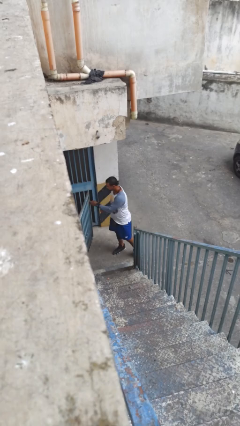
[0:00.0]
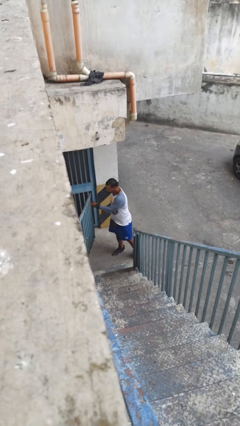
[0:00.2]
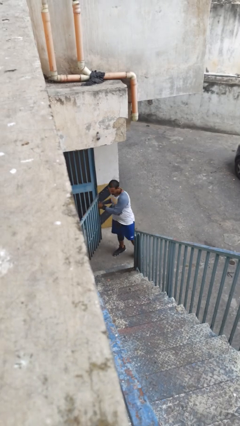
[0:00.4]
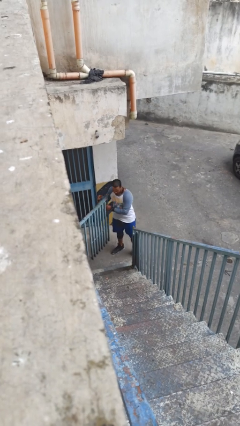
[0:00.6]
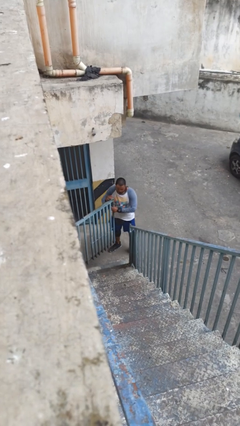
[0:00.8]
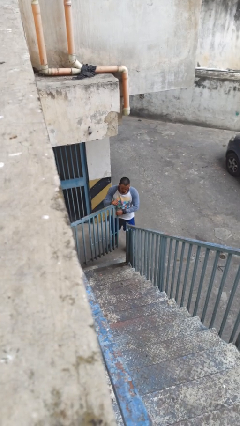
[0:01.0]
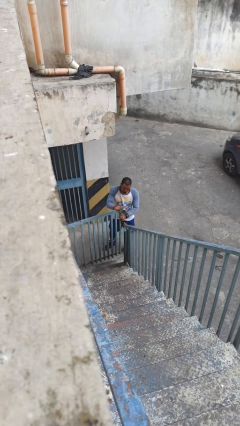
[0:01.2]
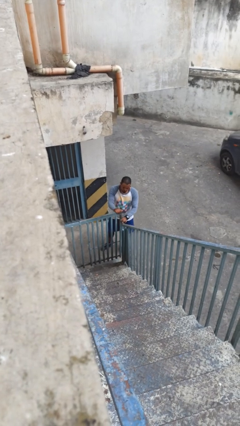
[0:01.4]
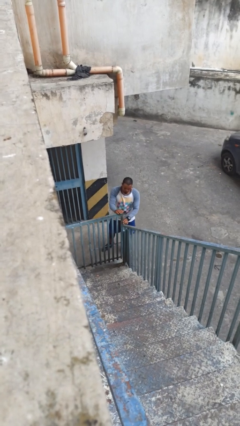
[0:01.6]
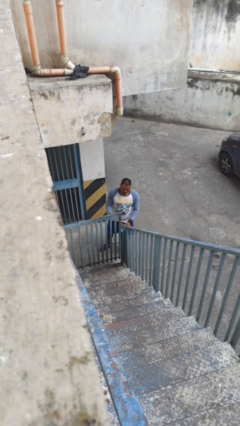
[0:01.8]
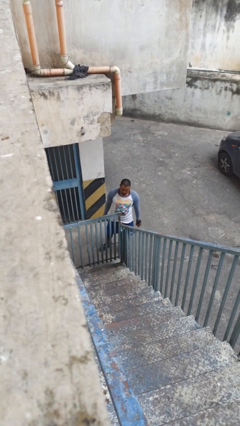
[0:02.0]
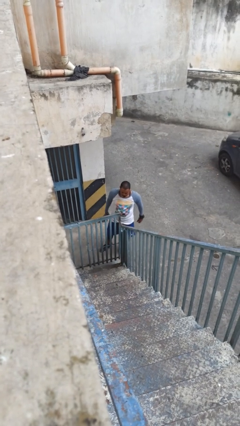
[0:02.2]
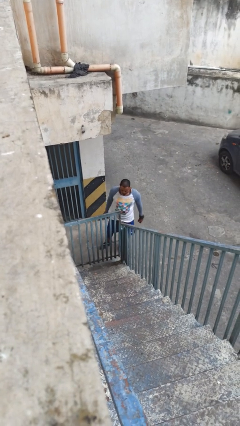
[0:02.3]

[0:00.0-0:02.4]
person closes facility door

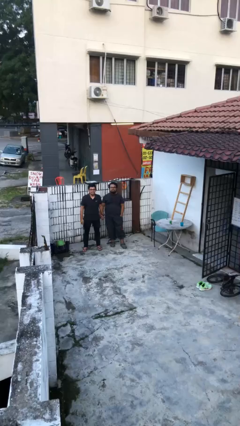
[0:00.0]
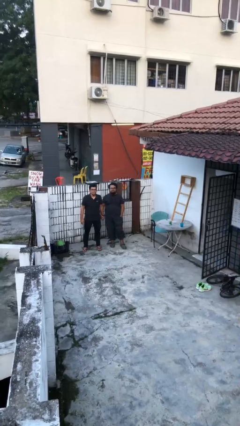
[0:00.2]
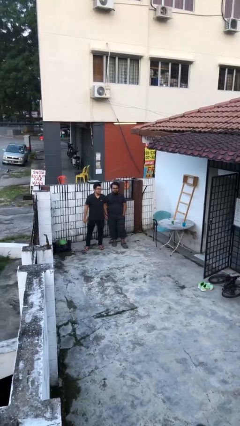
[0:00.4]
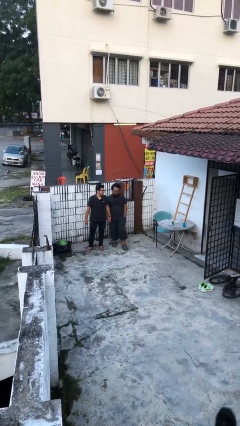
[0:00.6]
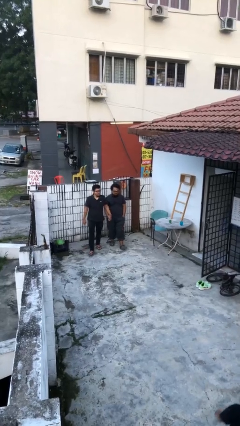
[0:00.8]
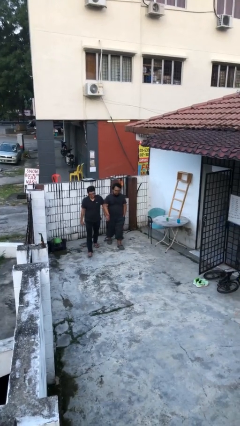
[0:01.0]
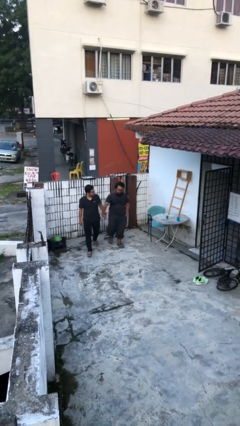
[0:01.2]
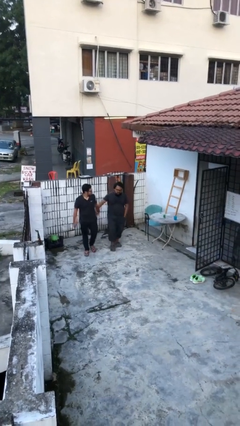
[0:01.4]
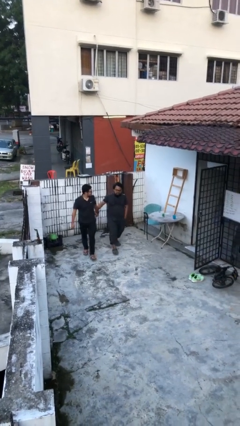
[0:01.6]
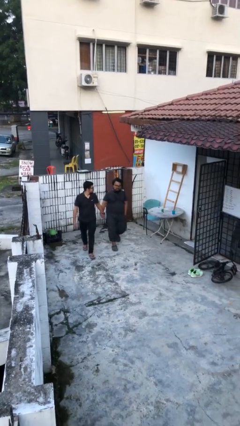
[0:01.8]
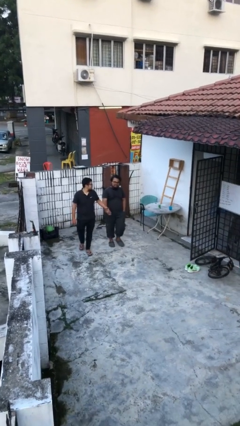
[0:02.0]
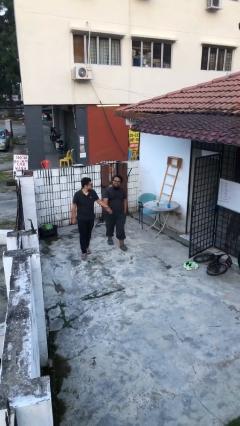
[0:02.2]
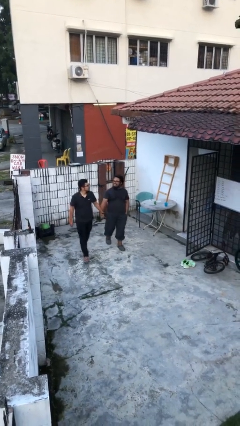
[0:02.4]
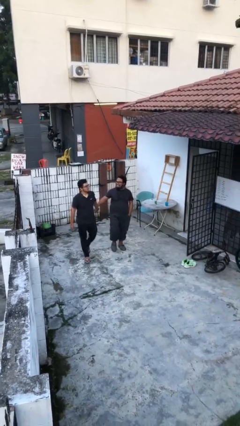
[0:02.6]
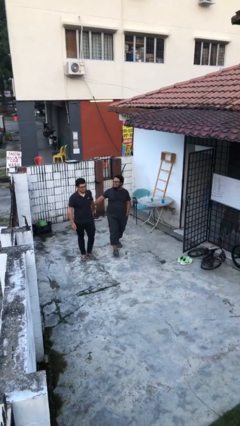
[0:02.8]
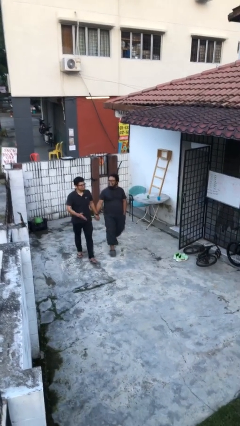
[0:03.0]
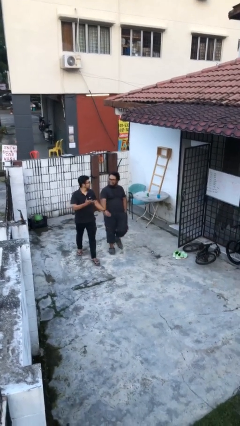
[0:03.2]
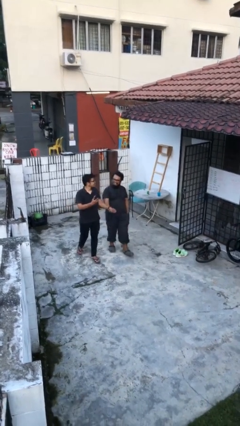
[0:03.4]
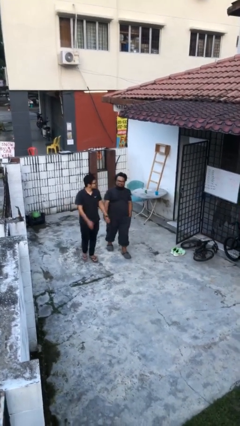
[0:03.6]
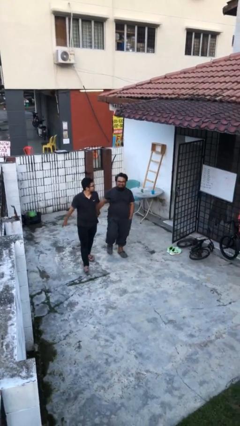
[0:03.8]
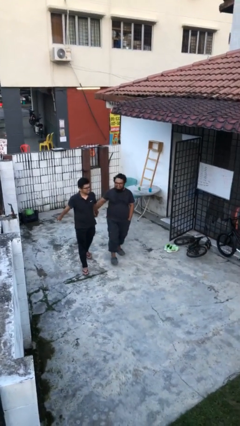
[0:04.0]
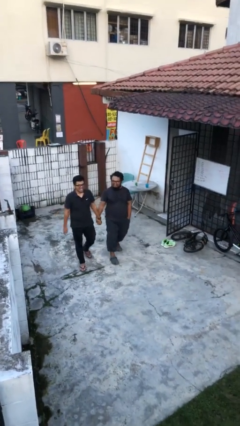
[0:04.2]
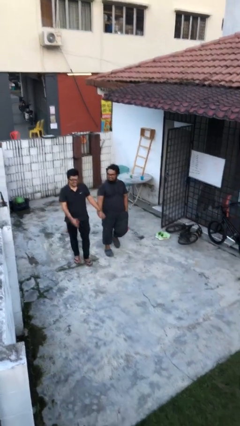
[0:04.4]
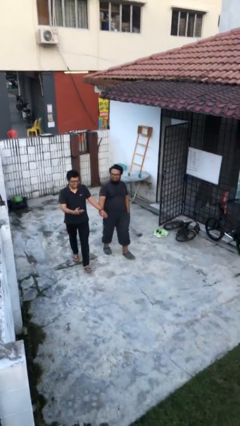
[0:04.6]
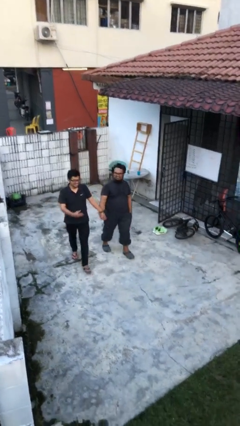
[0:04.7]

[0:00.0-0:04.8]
person holds hand

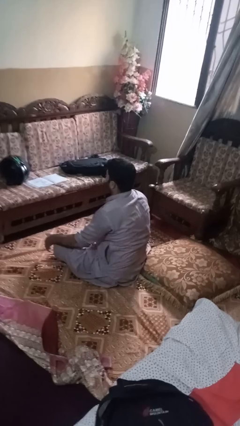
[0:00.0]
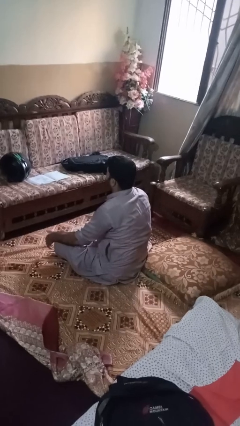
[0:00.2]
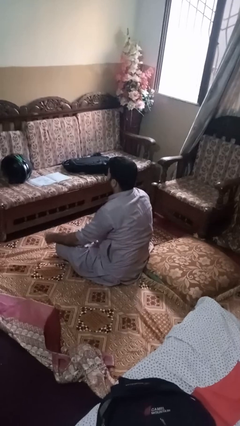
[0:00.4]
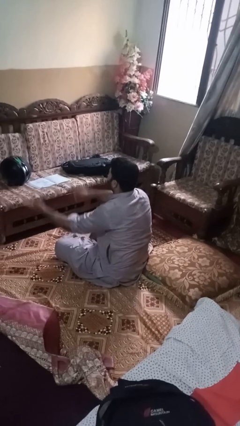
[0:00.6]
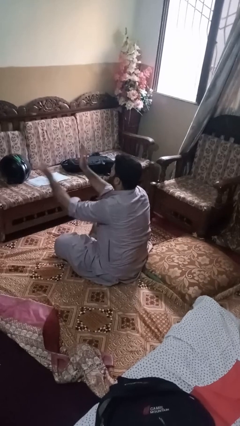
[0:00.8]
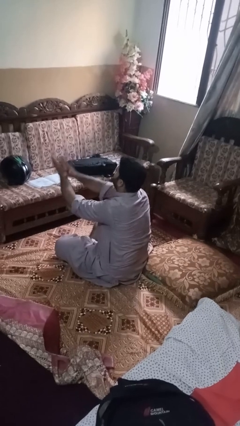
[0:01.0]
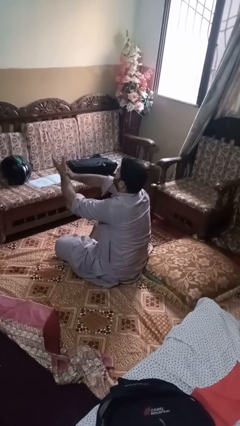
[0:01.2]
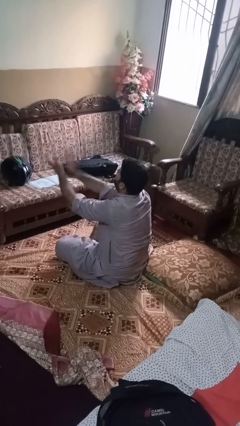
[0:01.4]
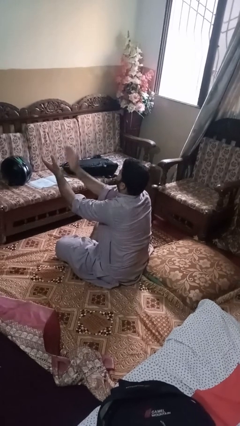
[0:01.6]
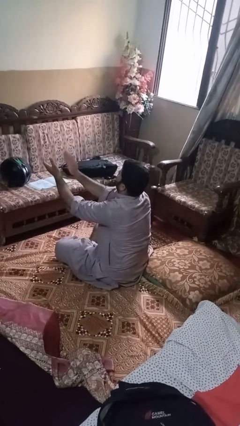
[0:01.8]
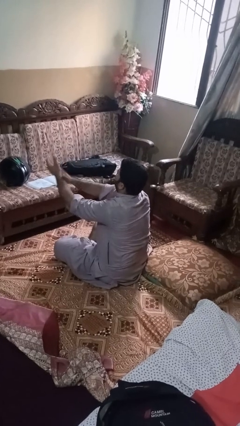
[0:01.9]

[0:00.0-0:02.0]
person claps hands

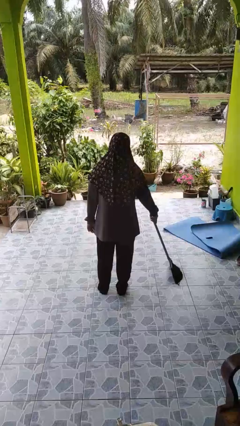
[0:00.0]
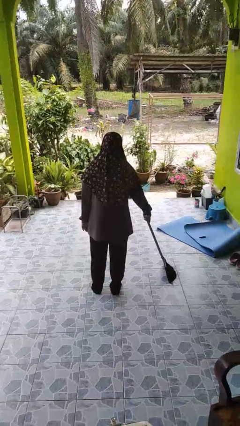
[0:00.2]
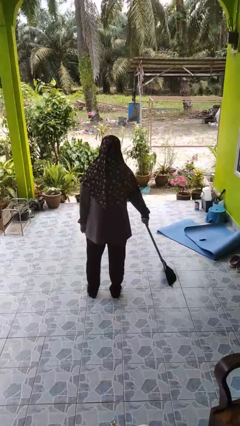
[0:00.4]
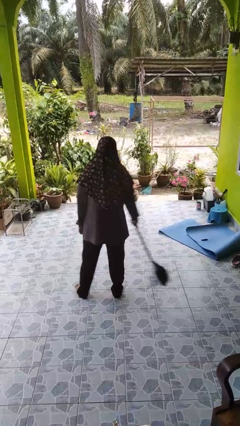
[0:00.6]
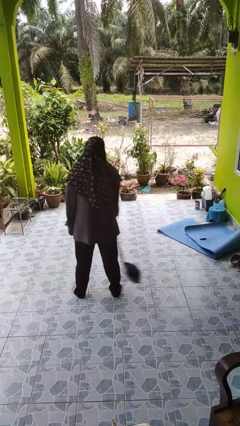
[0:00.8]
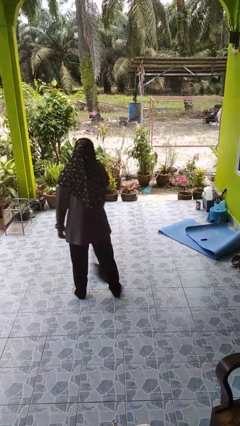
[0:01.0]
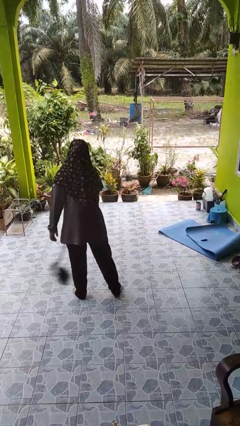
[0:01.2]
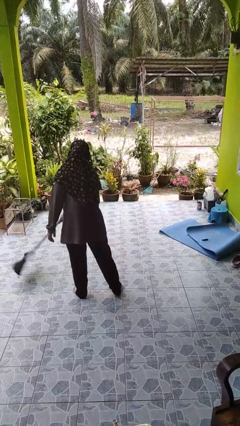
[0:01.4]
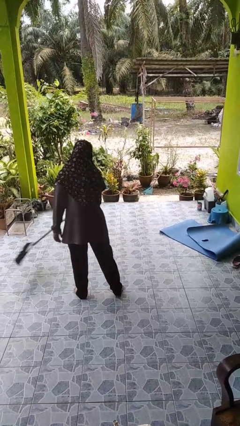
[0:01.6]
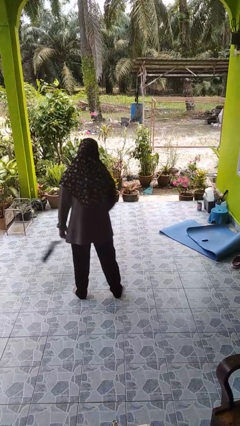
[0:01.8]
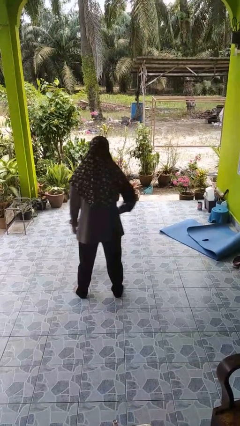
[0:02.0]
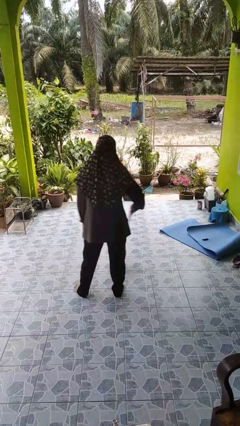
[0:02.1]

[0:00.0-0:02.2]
person sweeps floor

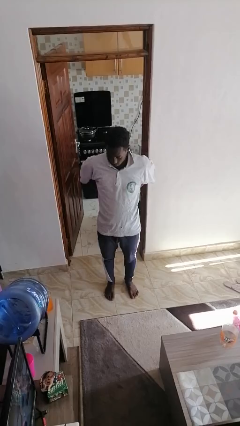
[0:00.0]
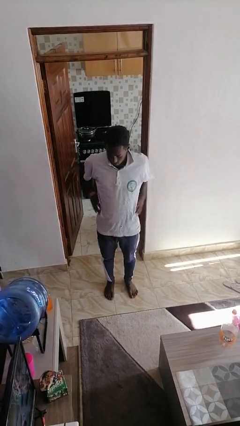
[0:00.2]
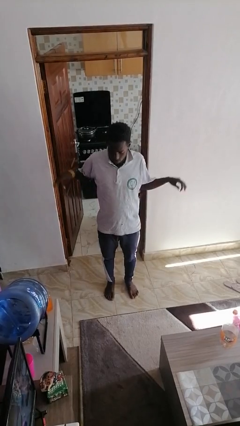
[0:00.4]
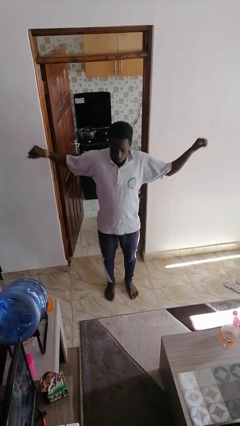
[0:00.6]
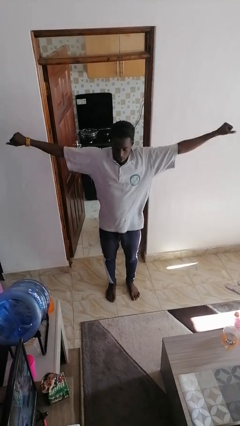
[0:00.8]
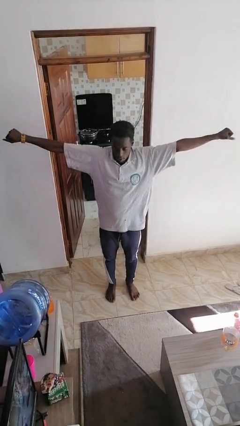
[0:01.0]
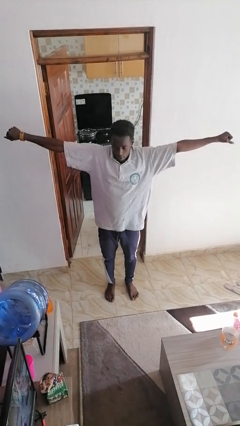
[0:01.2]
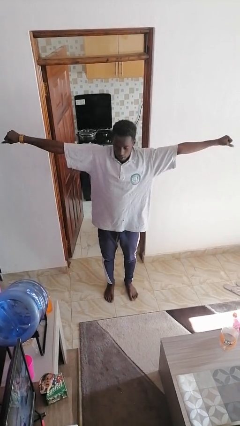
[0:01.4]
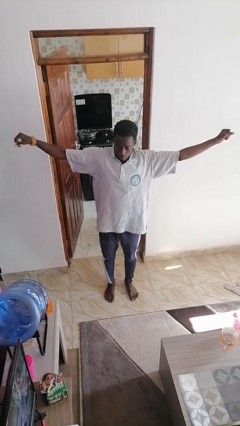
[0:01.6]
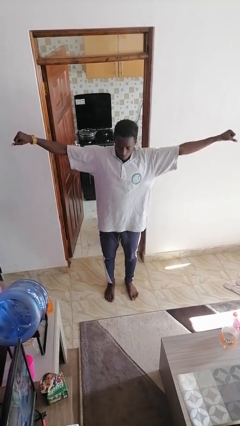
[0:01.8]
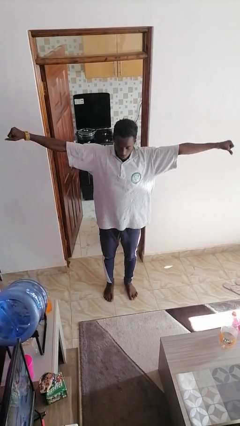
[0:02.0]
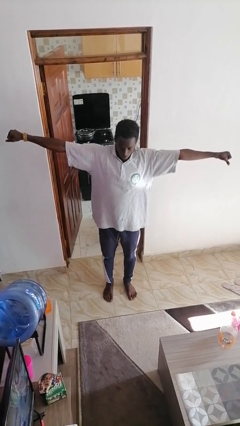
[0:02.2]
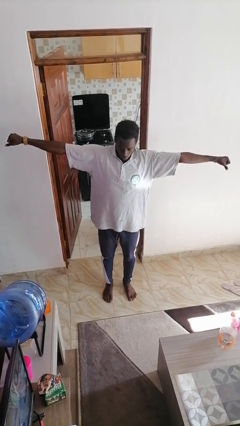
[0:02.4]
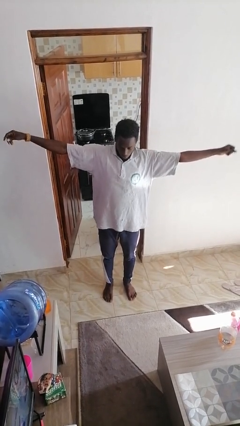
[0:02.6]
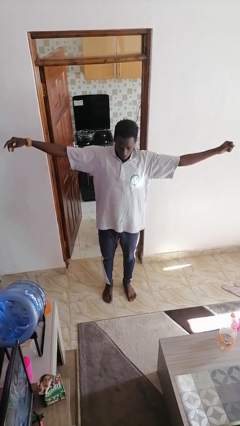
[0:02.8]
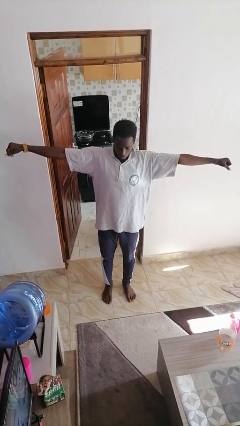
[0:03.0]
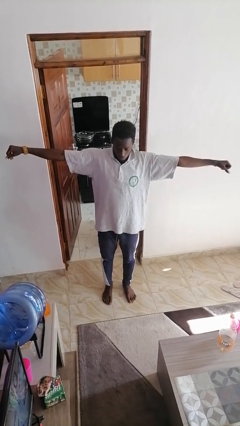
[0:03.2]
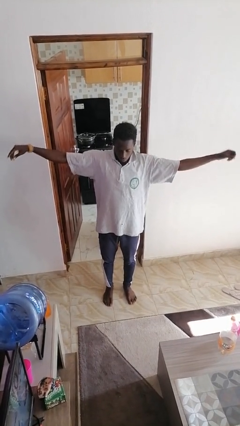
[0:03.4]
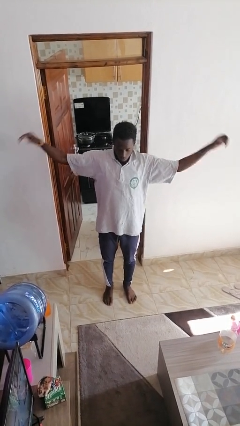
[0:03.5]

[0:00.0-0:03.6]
person stretches arms to side

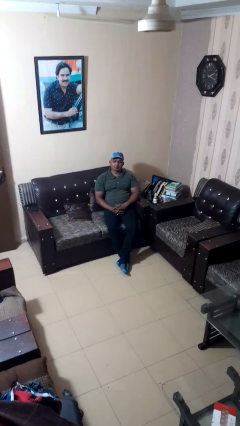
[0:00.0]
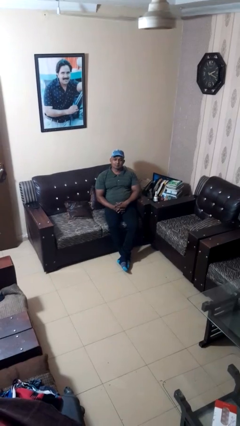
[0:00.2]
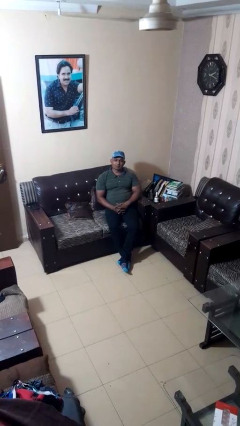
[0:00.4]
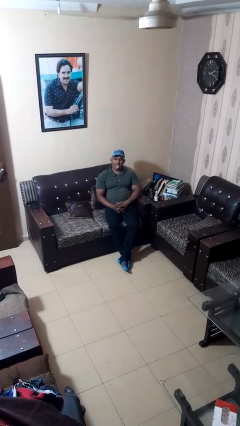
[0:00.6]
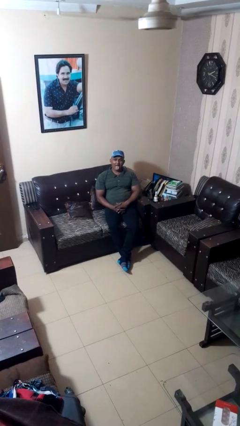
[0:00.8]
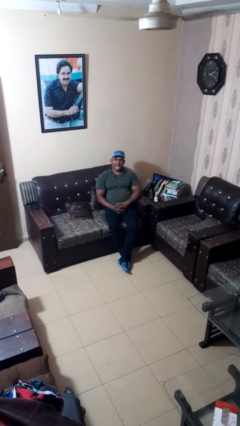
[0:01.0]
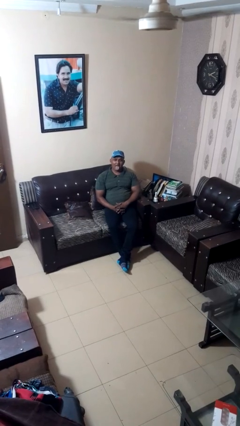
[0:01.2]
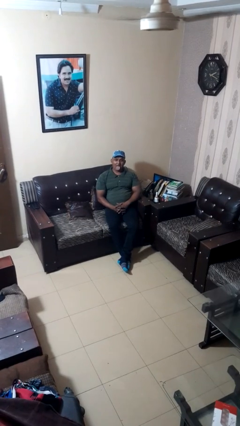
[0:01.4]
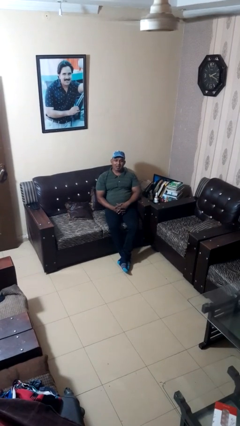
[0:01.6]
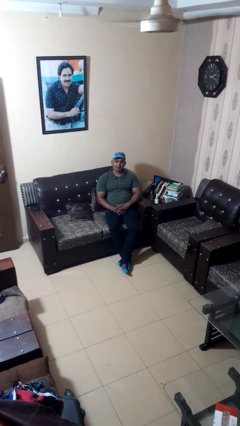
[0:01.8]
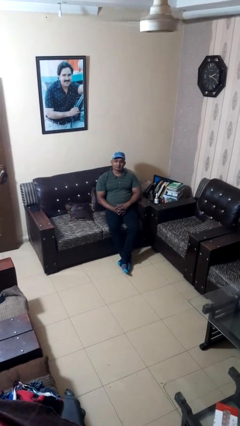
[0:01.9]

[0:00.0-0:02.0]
person sticks out tongue

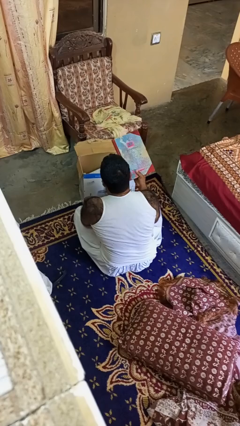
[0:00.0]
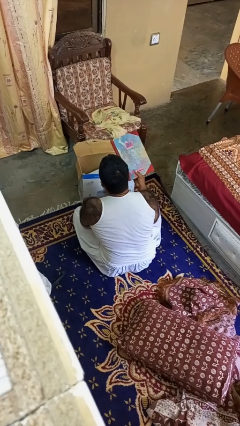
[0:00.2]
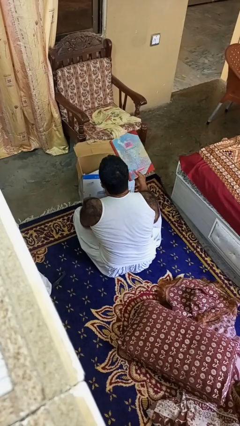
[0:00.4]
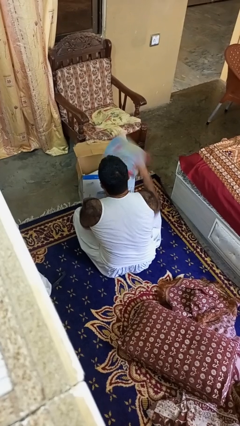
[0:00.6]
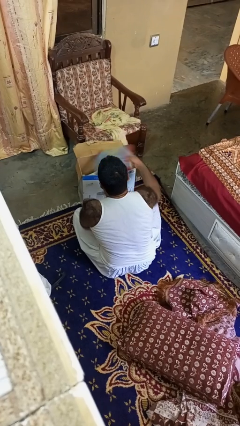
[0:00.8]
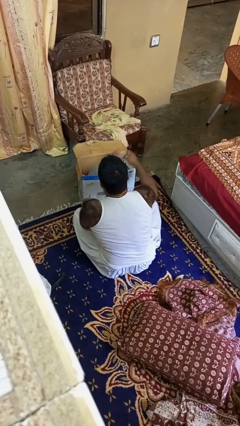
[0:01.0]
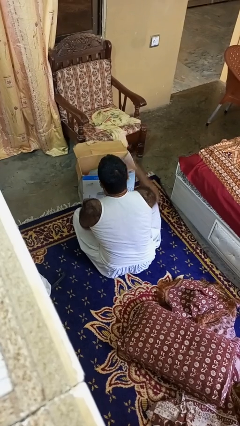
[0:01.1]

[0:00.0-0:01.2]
person puts object into box
